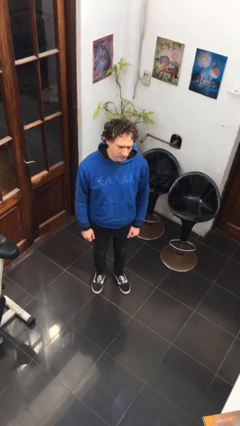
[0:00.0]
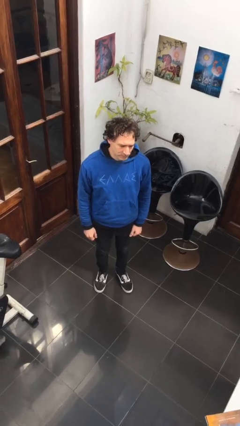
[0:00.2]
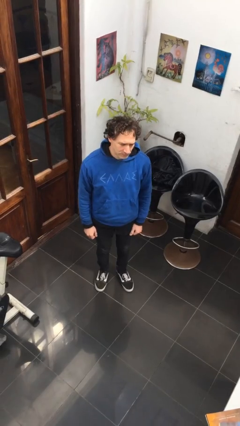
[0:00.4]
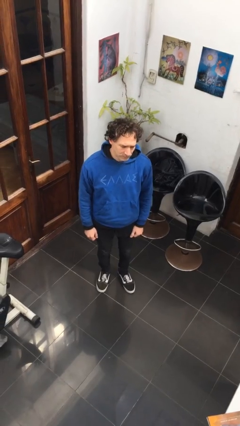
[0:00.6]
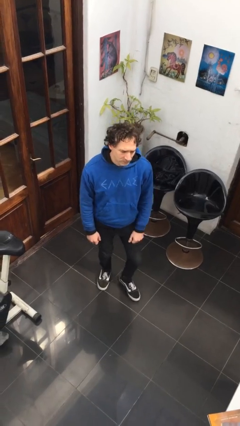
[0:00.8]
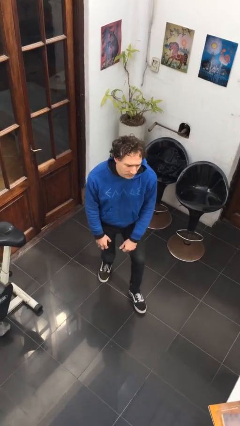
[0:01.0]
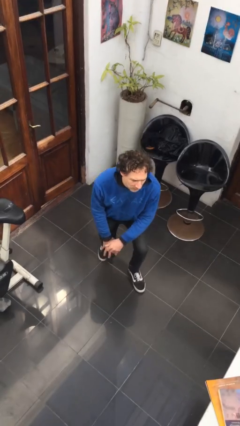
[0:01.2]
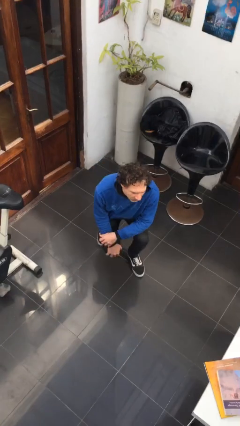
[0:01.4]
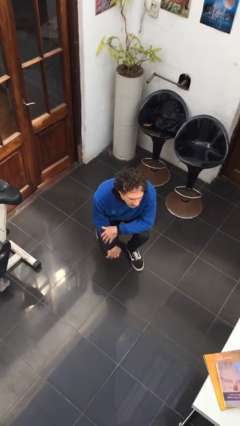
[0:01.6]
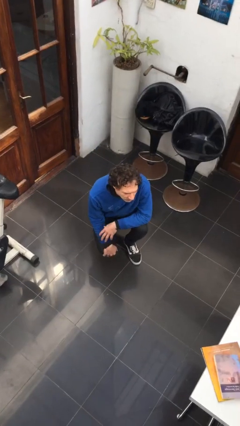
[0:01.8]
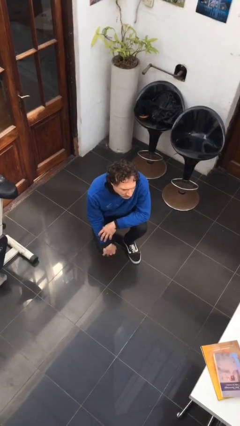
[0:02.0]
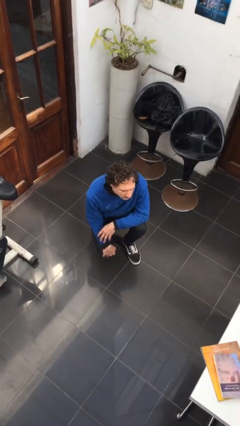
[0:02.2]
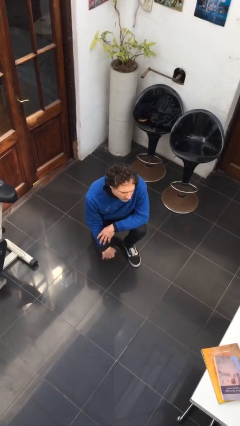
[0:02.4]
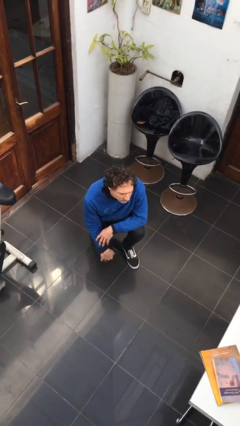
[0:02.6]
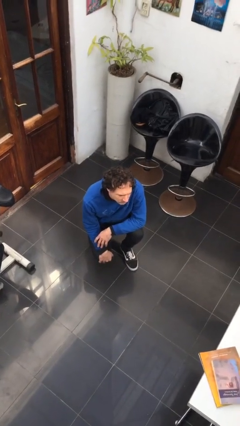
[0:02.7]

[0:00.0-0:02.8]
person squats

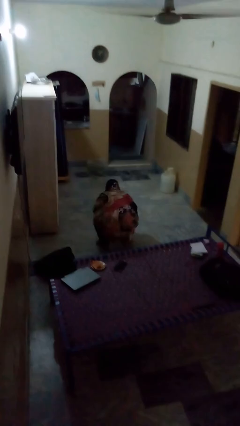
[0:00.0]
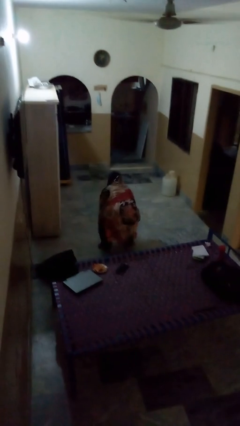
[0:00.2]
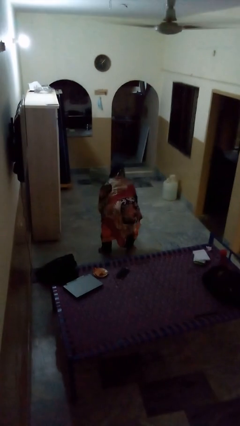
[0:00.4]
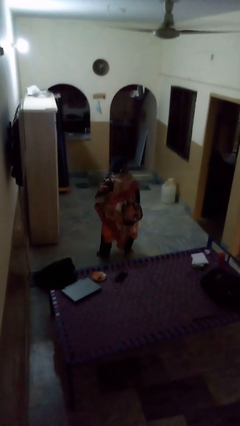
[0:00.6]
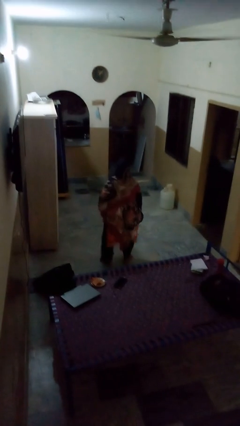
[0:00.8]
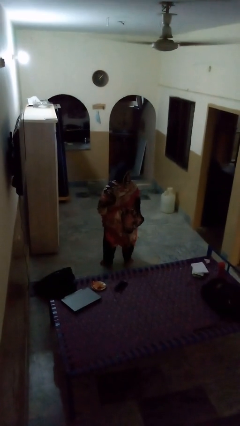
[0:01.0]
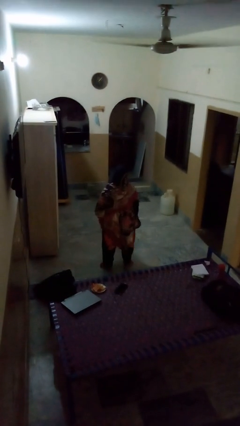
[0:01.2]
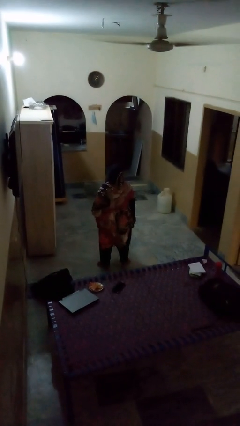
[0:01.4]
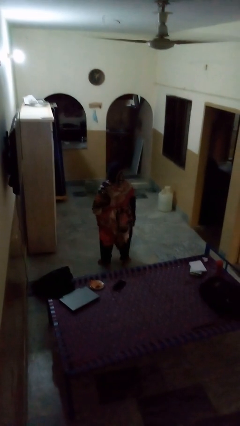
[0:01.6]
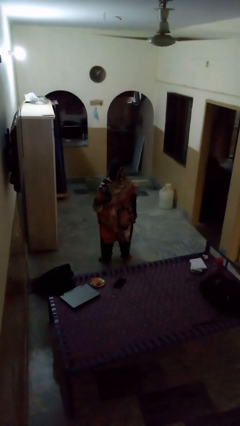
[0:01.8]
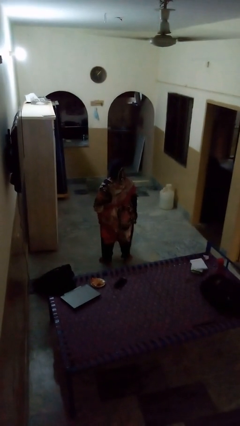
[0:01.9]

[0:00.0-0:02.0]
person stands up

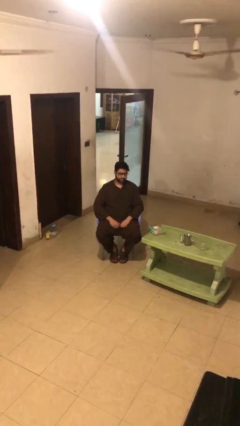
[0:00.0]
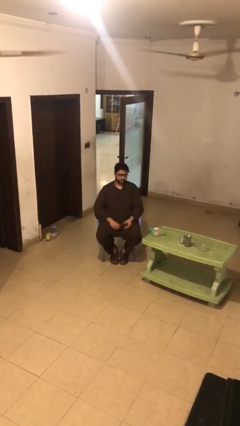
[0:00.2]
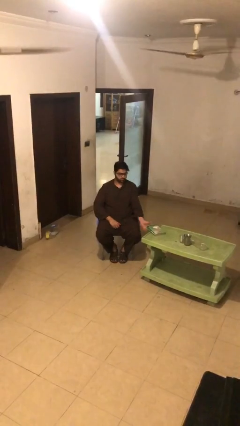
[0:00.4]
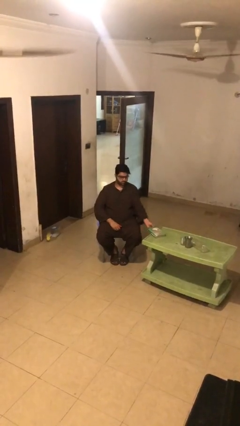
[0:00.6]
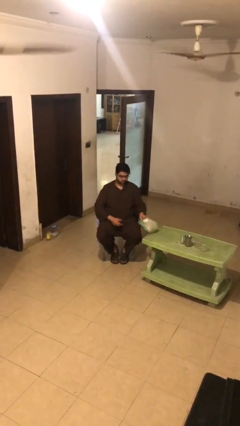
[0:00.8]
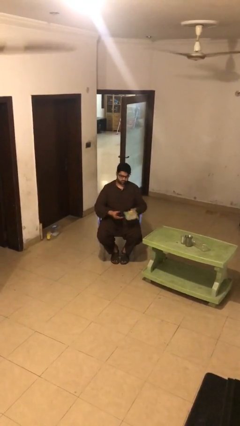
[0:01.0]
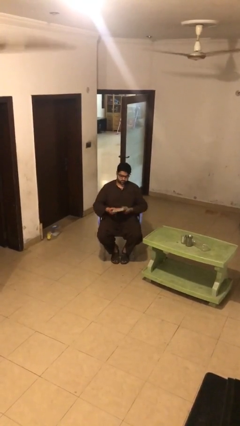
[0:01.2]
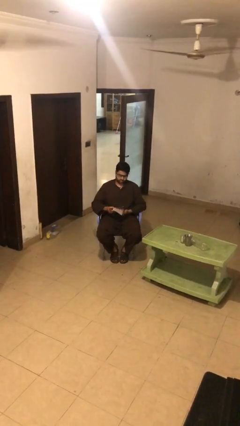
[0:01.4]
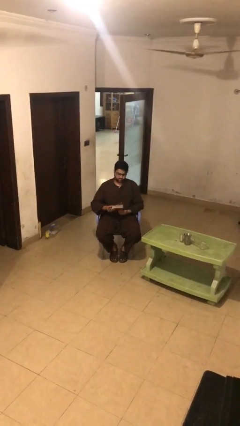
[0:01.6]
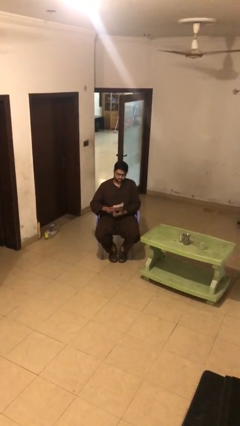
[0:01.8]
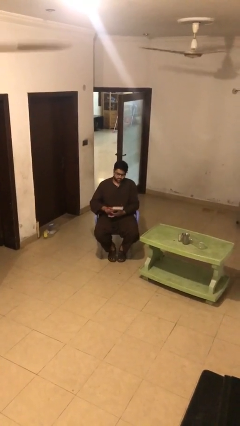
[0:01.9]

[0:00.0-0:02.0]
person picks up object from table

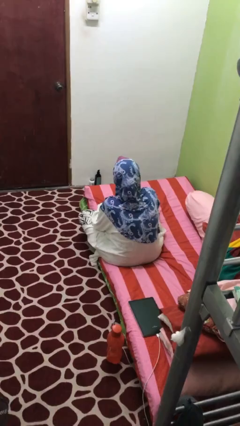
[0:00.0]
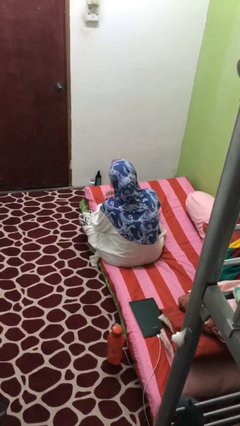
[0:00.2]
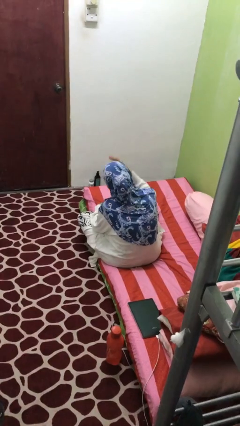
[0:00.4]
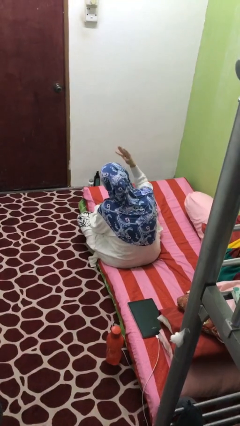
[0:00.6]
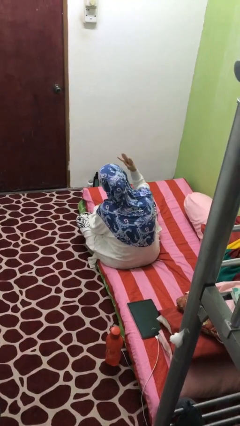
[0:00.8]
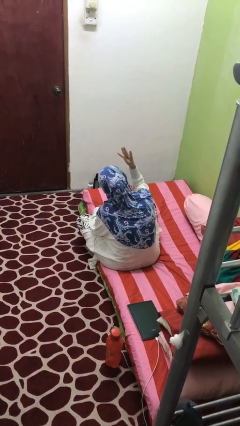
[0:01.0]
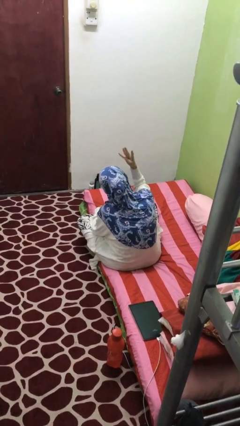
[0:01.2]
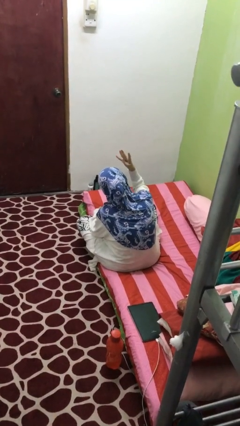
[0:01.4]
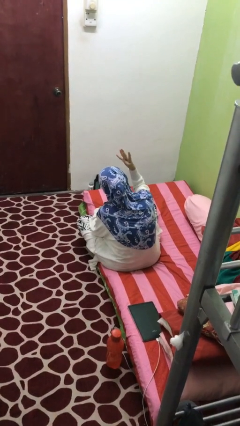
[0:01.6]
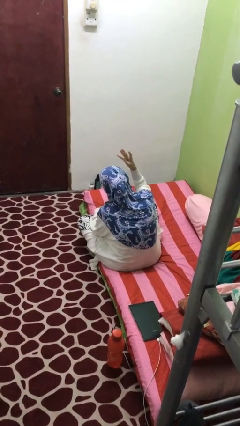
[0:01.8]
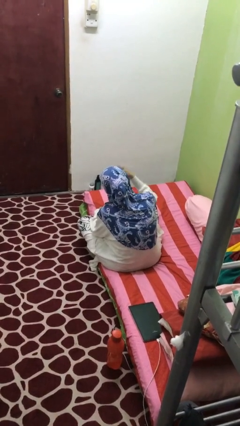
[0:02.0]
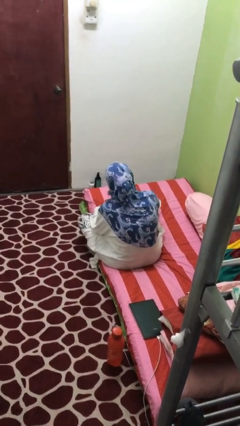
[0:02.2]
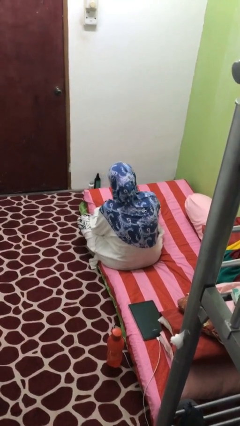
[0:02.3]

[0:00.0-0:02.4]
person gestures number four

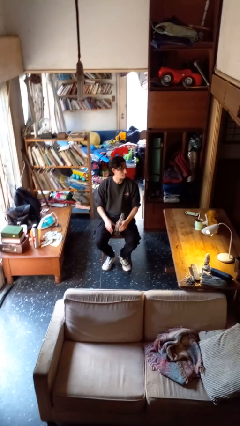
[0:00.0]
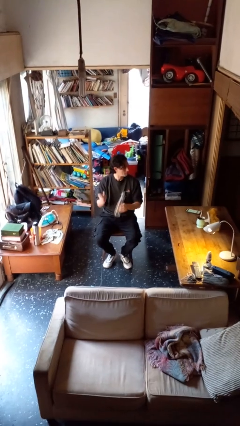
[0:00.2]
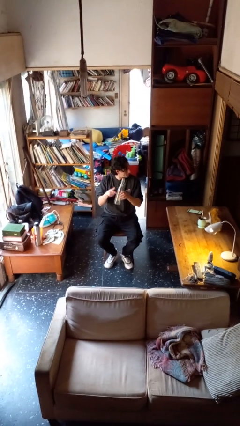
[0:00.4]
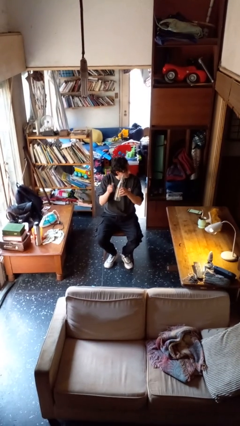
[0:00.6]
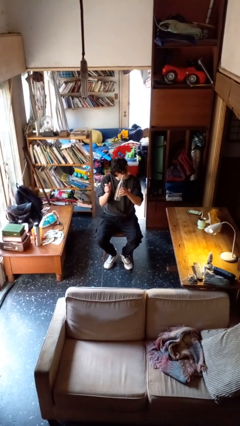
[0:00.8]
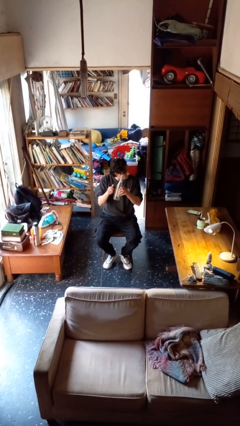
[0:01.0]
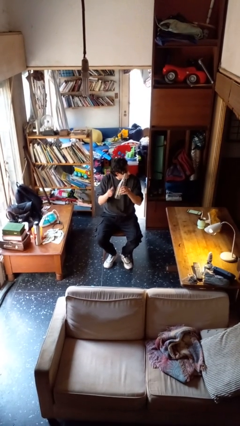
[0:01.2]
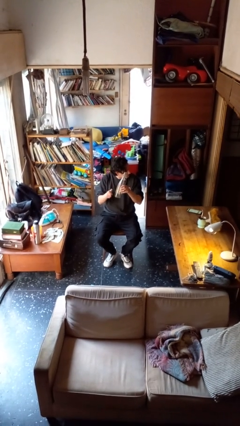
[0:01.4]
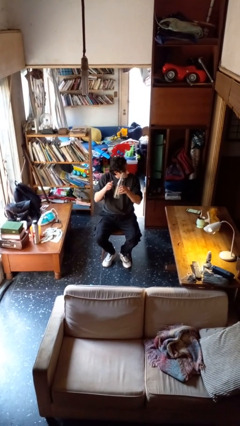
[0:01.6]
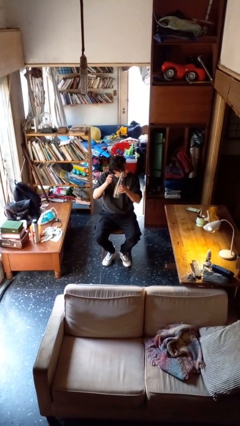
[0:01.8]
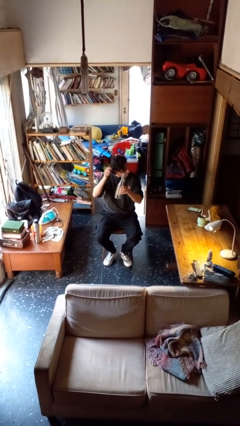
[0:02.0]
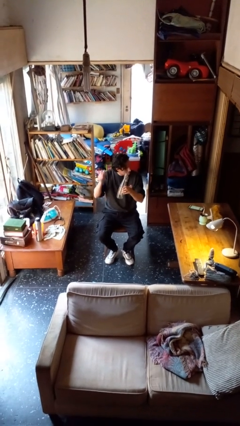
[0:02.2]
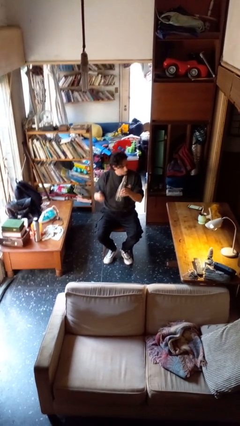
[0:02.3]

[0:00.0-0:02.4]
person taps object with finger

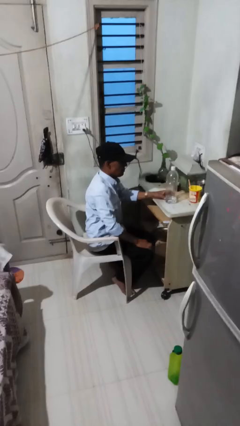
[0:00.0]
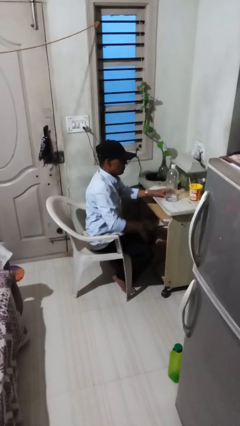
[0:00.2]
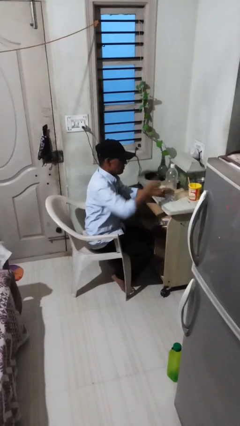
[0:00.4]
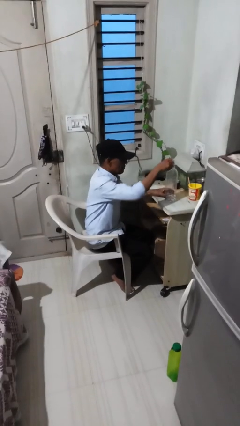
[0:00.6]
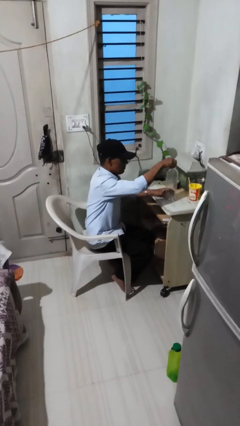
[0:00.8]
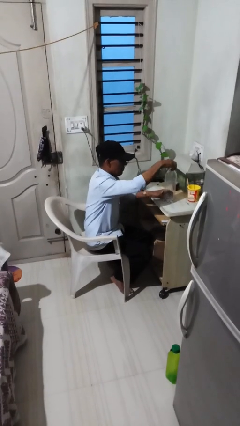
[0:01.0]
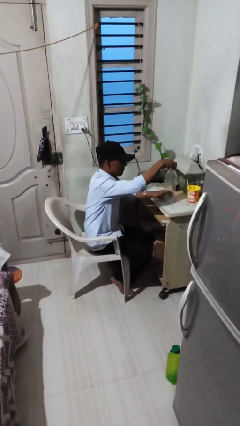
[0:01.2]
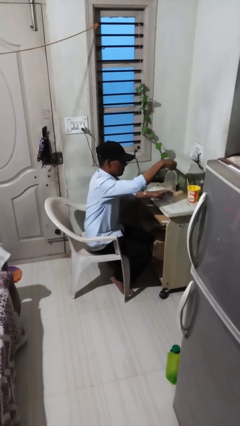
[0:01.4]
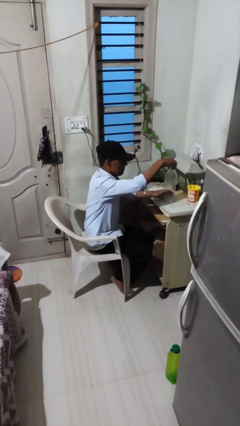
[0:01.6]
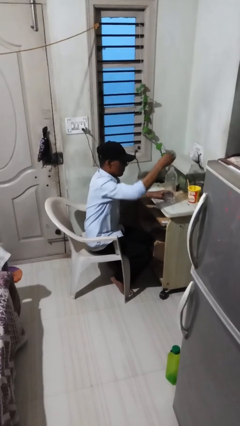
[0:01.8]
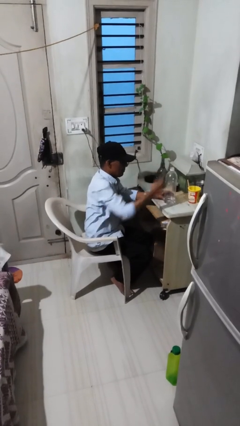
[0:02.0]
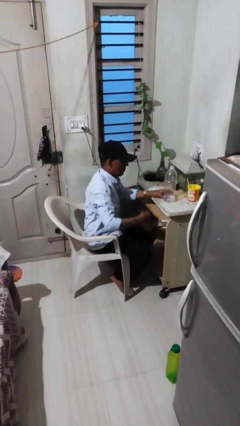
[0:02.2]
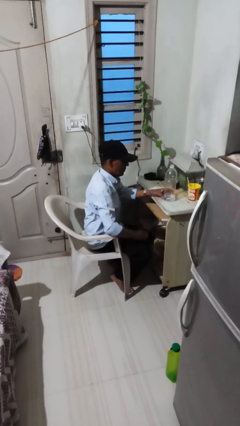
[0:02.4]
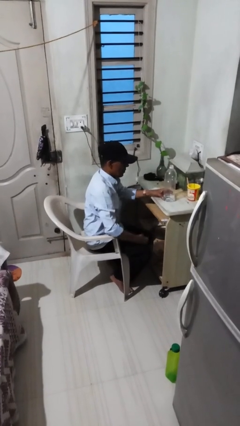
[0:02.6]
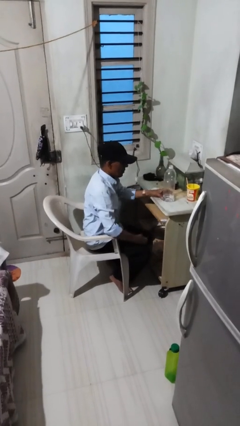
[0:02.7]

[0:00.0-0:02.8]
person unscrews lid from bottle

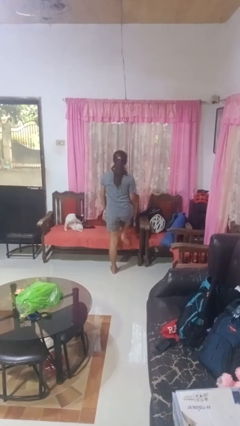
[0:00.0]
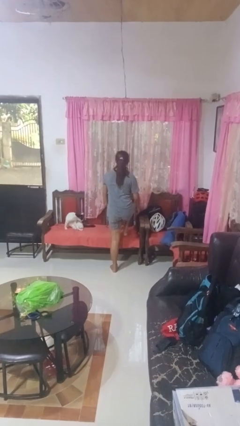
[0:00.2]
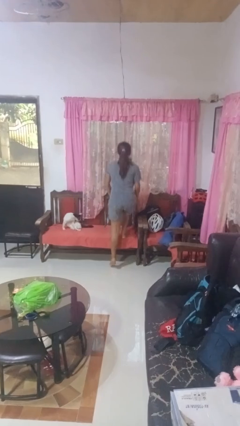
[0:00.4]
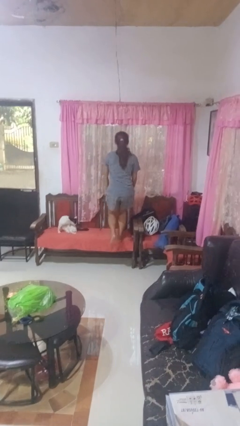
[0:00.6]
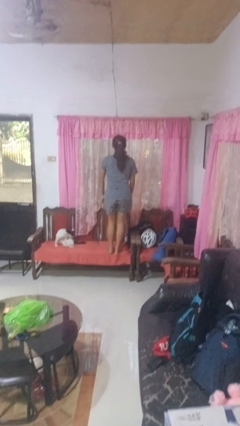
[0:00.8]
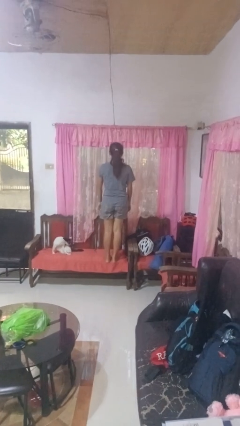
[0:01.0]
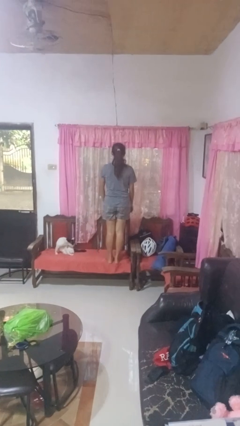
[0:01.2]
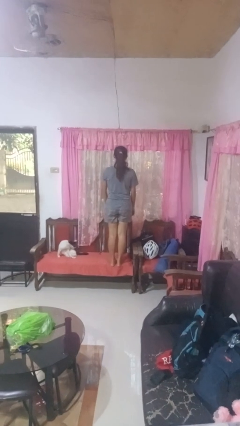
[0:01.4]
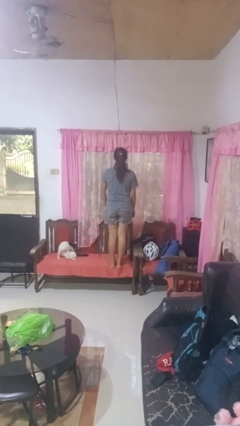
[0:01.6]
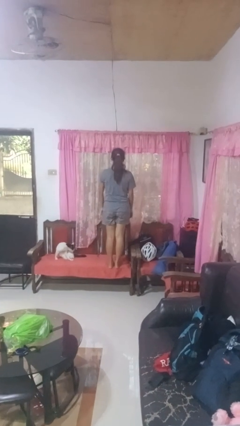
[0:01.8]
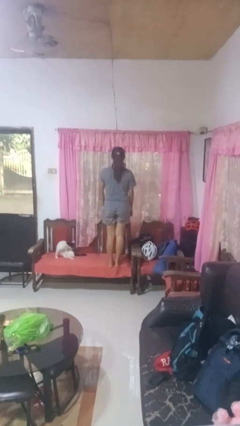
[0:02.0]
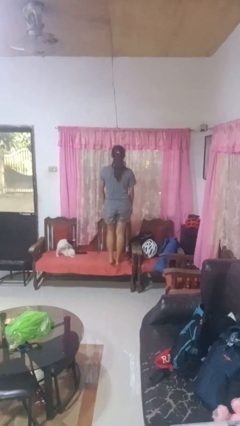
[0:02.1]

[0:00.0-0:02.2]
person climbs on chair

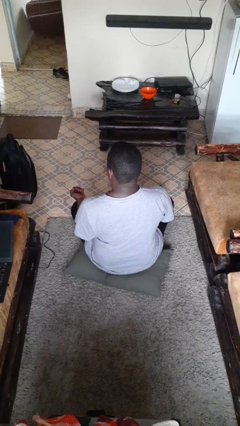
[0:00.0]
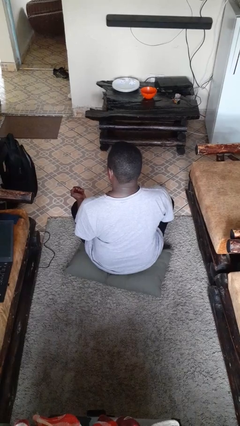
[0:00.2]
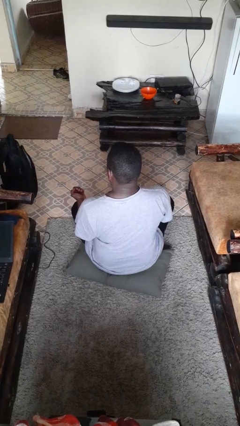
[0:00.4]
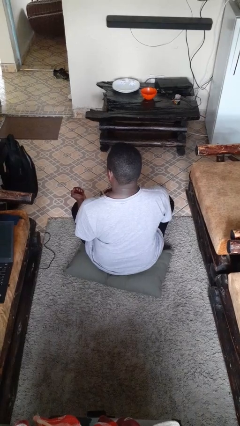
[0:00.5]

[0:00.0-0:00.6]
person clips fingernails
